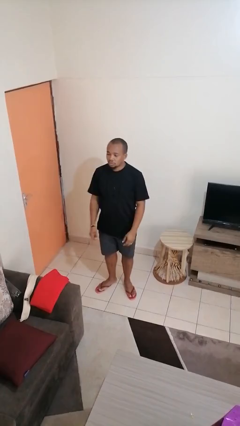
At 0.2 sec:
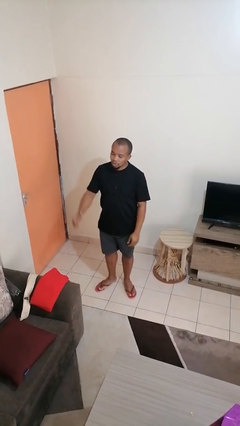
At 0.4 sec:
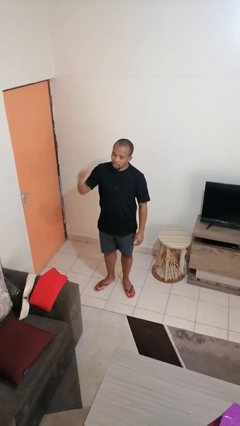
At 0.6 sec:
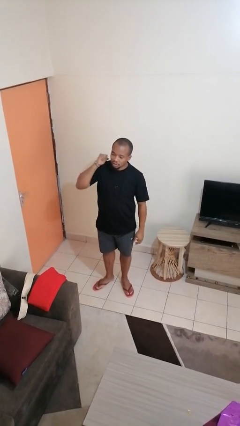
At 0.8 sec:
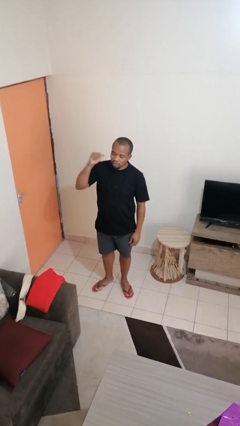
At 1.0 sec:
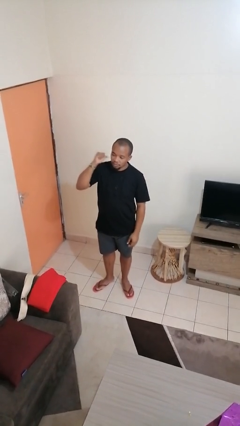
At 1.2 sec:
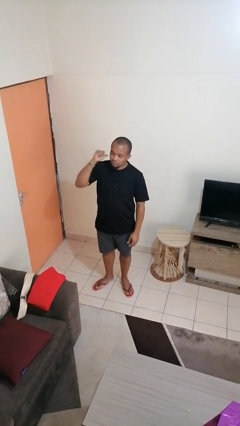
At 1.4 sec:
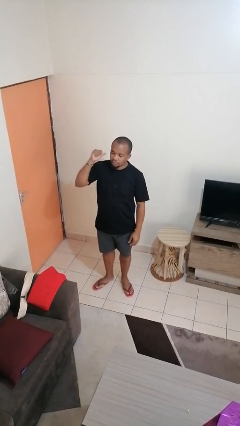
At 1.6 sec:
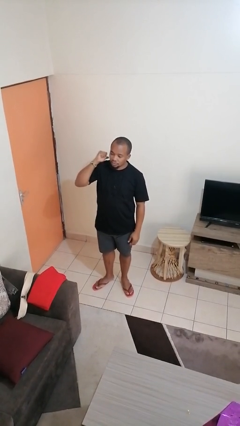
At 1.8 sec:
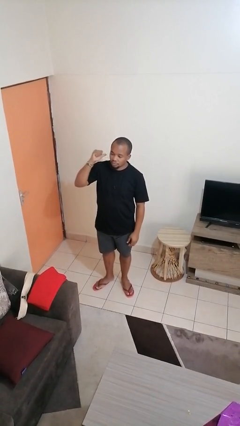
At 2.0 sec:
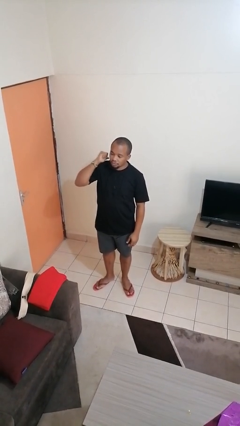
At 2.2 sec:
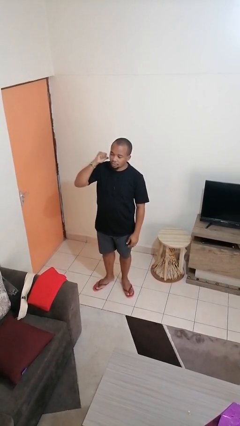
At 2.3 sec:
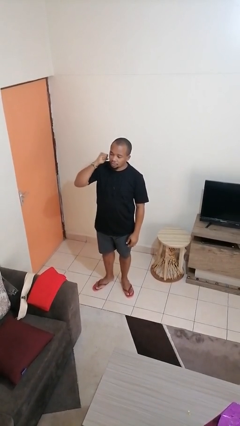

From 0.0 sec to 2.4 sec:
person gestures behind me

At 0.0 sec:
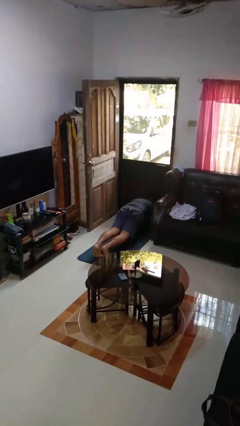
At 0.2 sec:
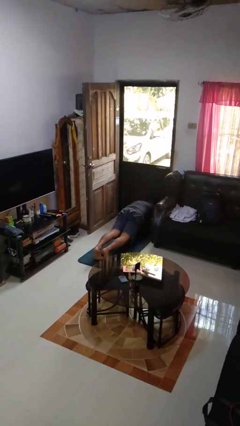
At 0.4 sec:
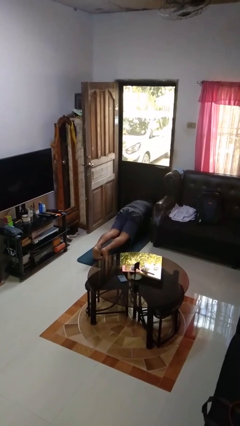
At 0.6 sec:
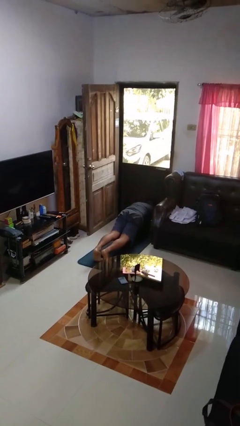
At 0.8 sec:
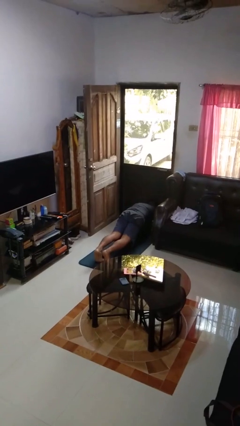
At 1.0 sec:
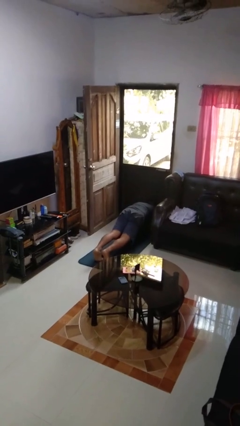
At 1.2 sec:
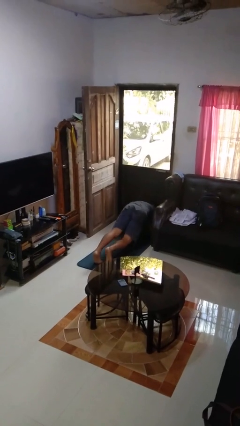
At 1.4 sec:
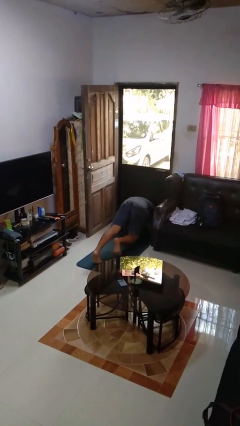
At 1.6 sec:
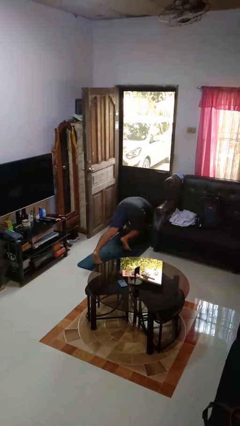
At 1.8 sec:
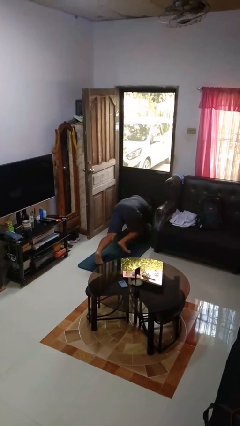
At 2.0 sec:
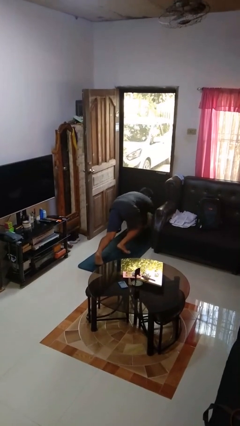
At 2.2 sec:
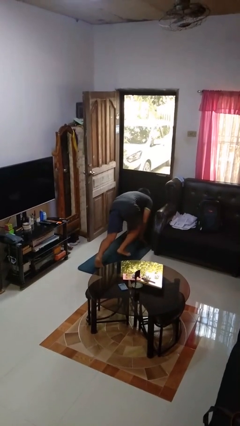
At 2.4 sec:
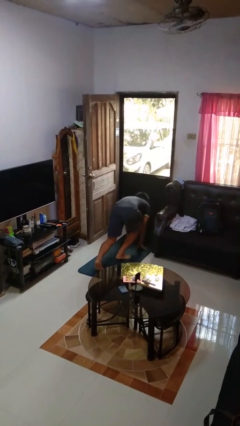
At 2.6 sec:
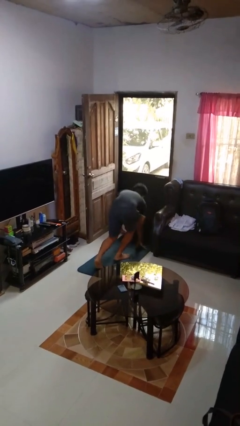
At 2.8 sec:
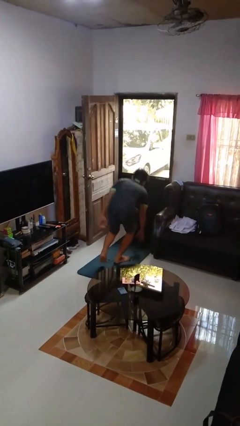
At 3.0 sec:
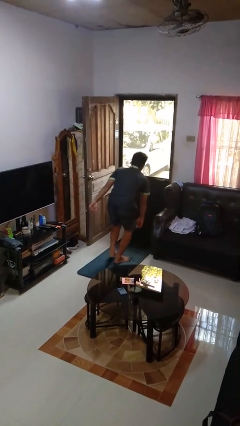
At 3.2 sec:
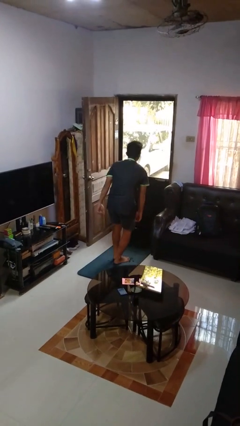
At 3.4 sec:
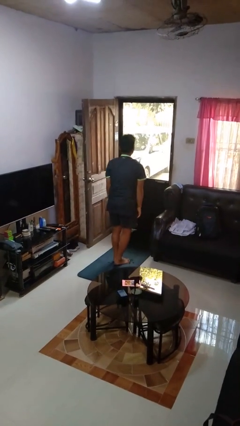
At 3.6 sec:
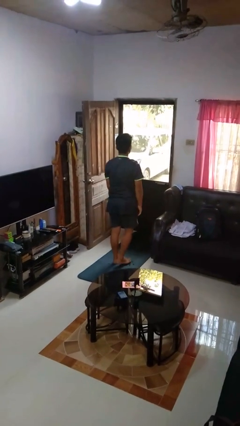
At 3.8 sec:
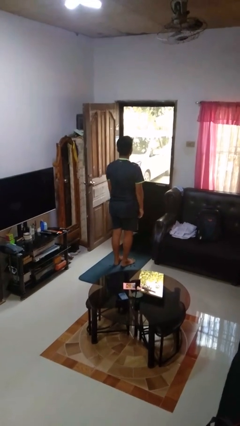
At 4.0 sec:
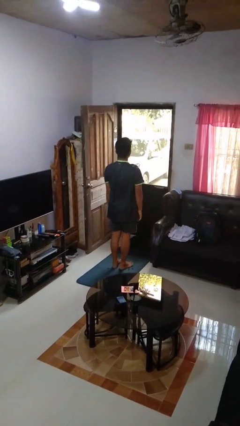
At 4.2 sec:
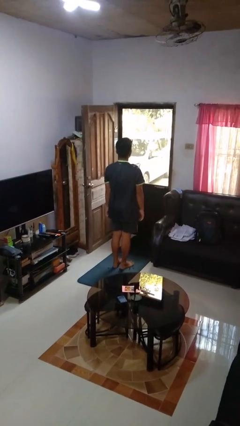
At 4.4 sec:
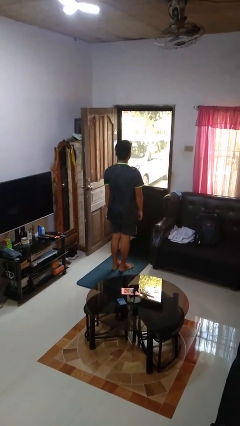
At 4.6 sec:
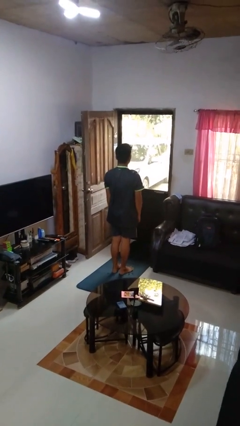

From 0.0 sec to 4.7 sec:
person stands up from floor

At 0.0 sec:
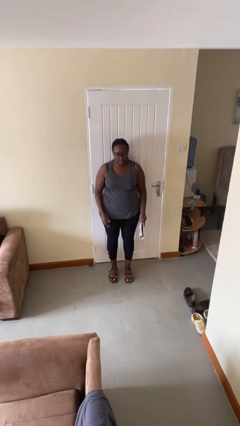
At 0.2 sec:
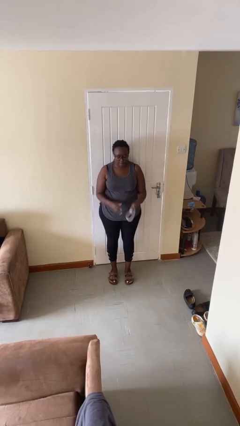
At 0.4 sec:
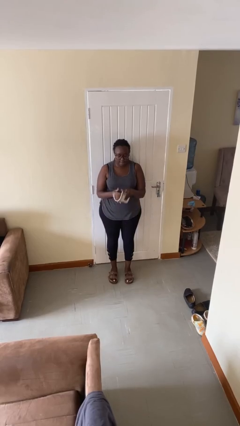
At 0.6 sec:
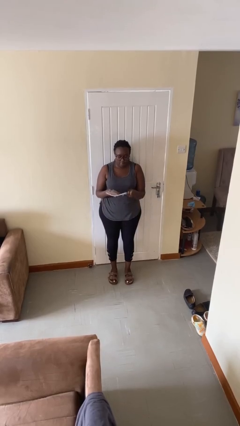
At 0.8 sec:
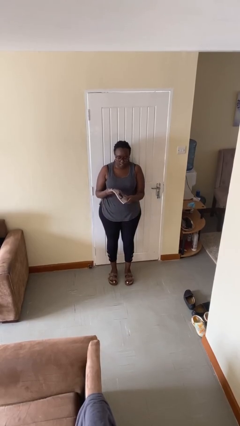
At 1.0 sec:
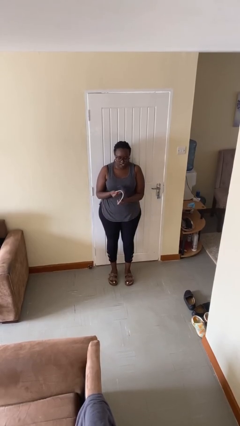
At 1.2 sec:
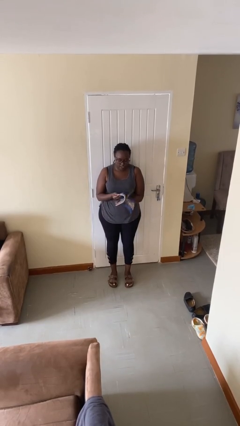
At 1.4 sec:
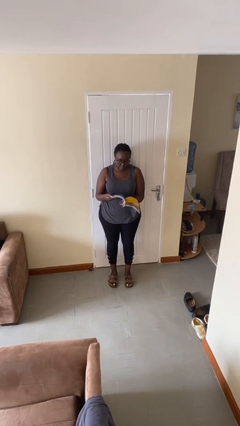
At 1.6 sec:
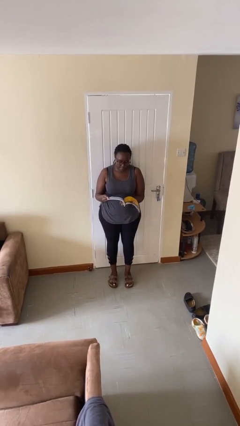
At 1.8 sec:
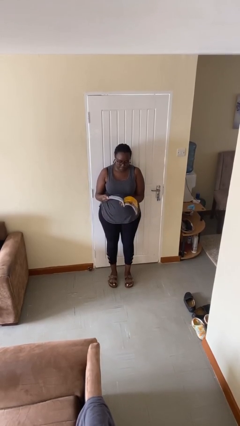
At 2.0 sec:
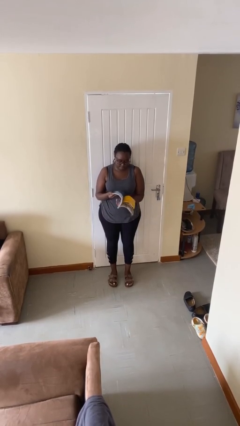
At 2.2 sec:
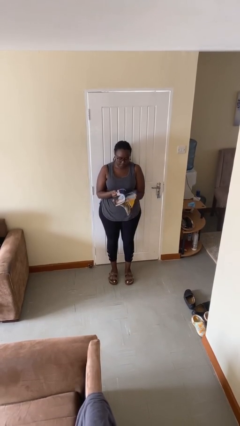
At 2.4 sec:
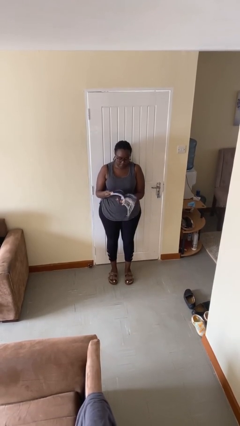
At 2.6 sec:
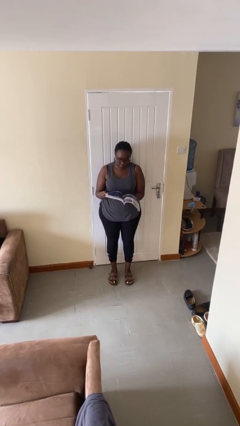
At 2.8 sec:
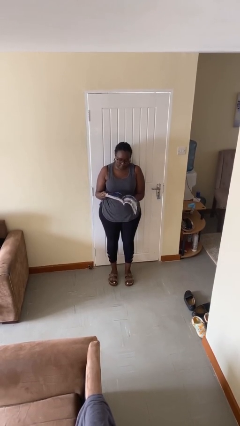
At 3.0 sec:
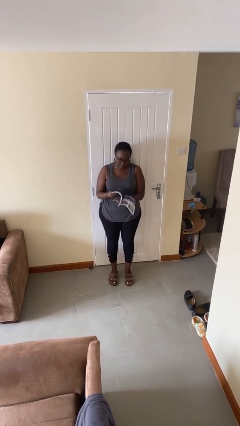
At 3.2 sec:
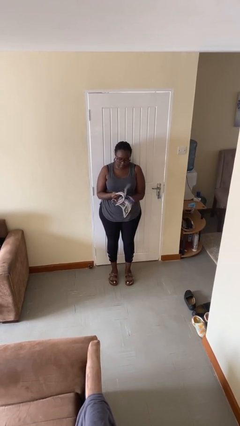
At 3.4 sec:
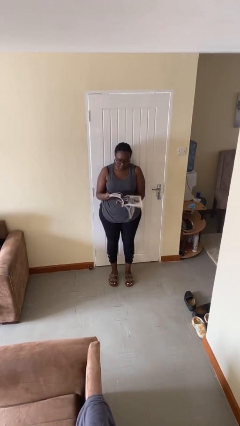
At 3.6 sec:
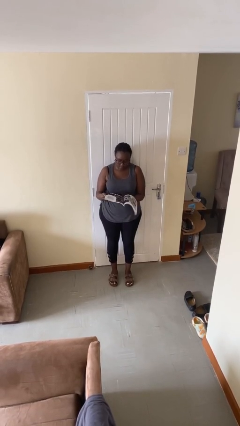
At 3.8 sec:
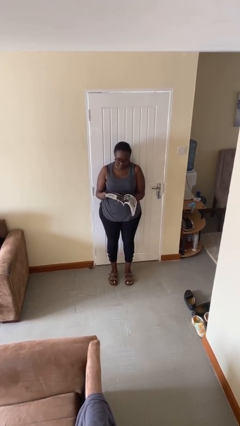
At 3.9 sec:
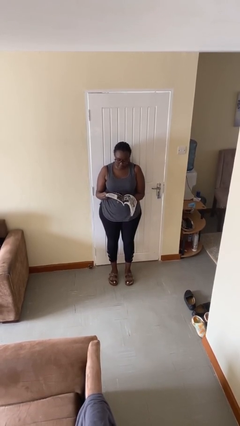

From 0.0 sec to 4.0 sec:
person reads magazine

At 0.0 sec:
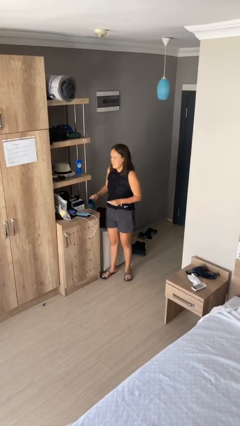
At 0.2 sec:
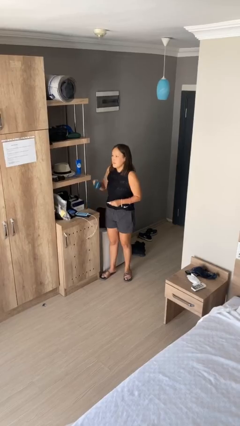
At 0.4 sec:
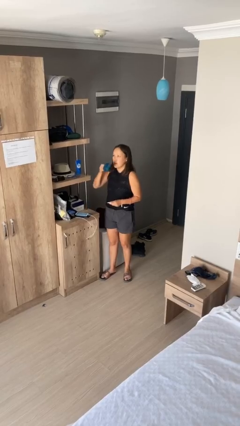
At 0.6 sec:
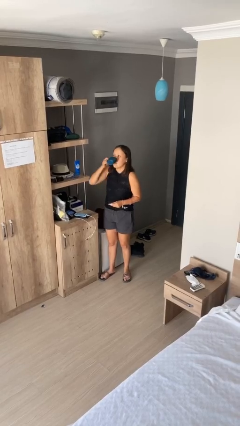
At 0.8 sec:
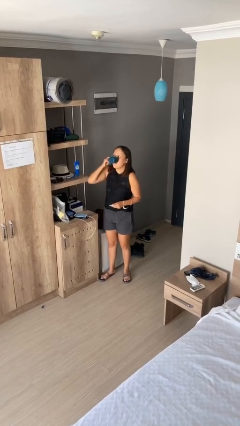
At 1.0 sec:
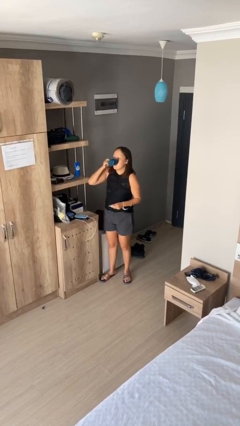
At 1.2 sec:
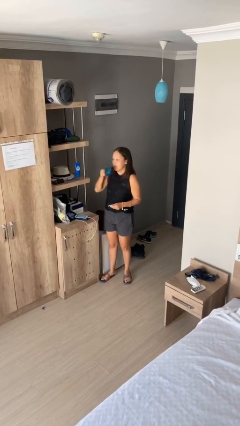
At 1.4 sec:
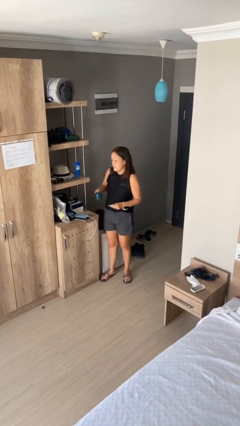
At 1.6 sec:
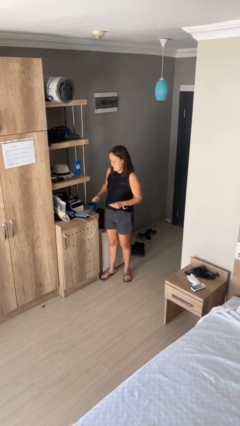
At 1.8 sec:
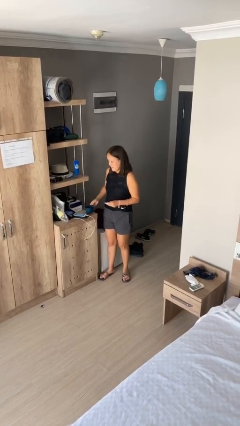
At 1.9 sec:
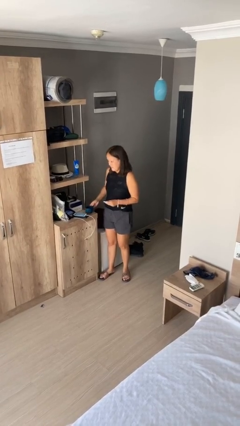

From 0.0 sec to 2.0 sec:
person drinks from cup

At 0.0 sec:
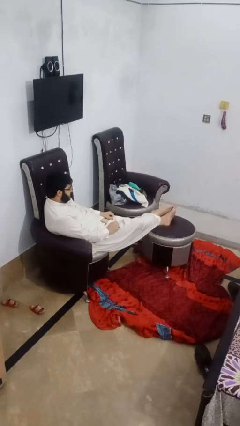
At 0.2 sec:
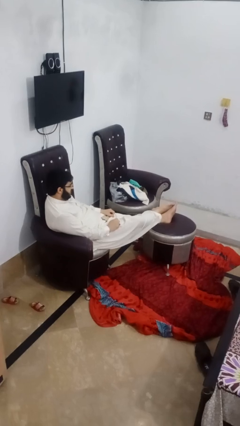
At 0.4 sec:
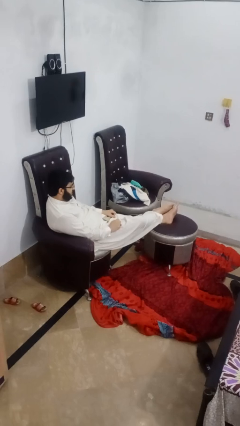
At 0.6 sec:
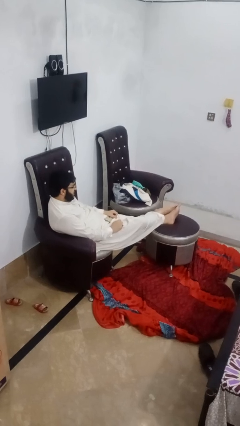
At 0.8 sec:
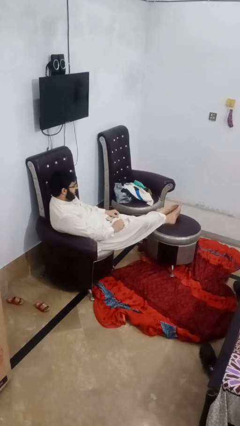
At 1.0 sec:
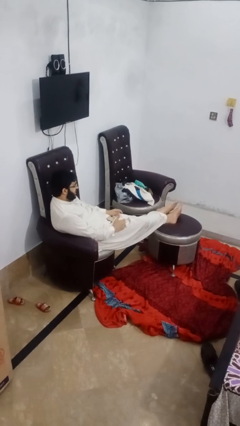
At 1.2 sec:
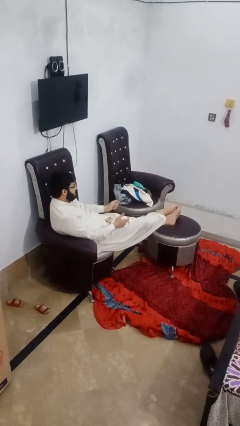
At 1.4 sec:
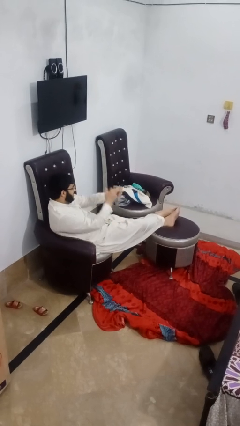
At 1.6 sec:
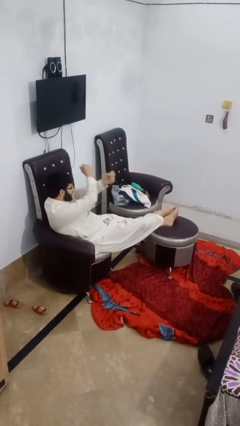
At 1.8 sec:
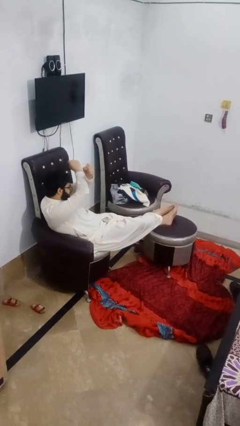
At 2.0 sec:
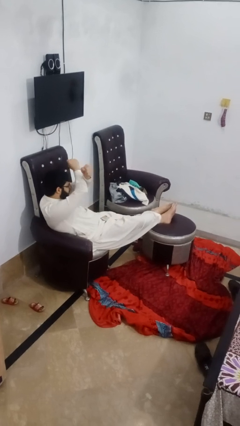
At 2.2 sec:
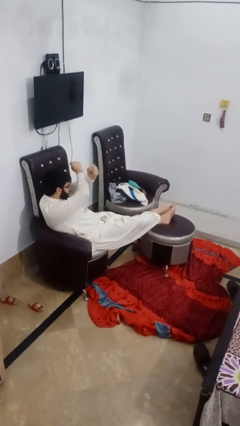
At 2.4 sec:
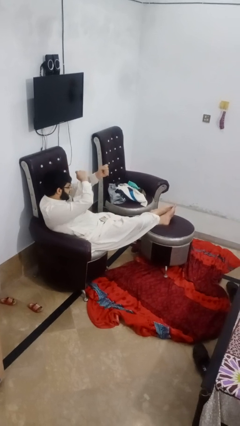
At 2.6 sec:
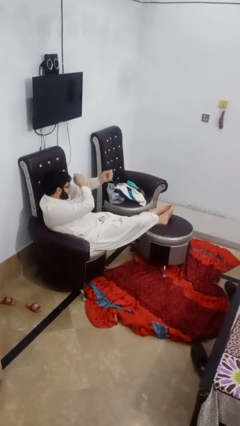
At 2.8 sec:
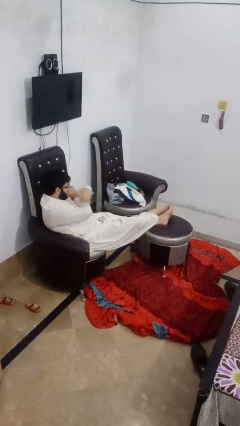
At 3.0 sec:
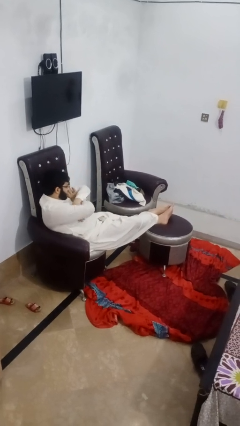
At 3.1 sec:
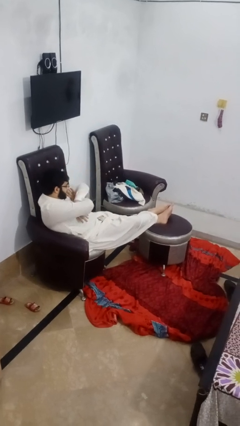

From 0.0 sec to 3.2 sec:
person crosses arms

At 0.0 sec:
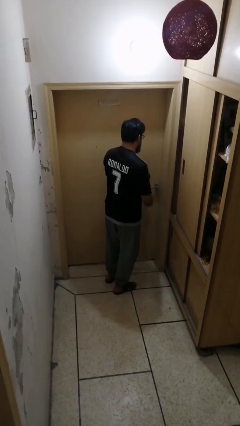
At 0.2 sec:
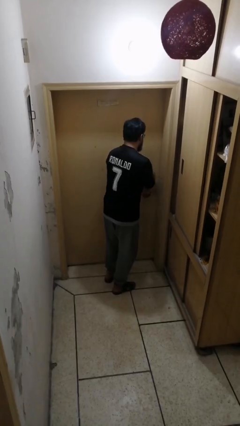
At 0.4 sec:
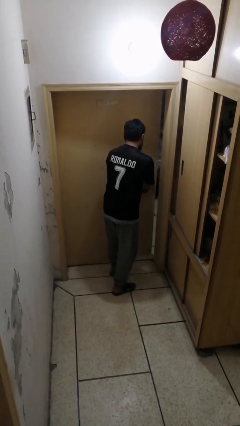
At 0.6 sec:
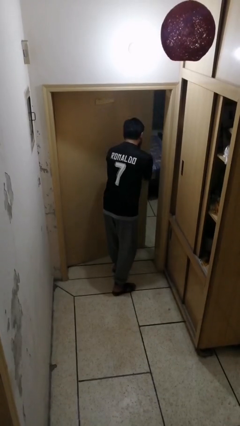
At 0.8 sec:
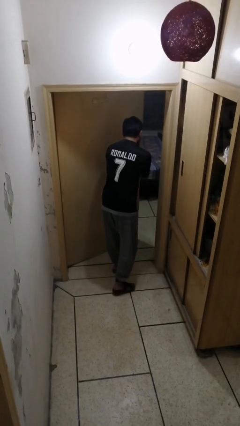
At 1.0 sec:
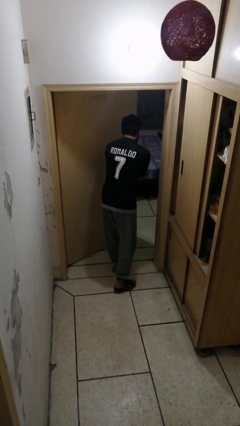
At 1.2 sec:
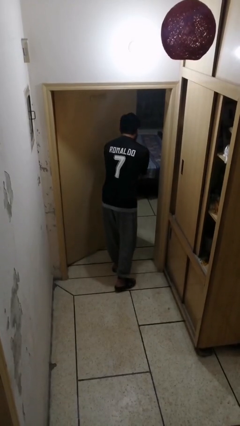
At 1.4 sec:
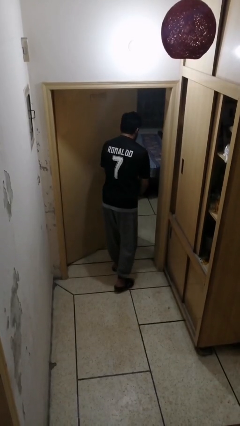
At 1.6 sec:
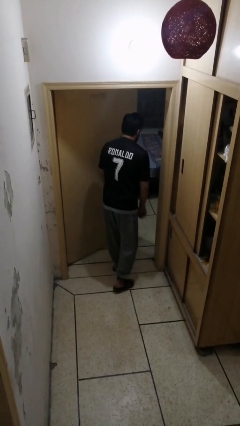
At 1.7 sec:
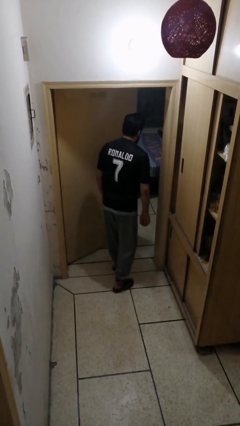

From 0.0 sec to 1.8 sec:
person opens facility door
